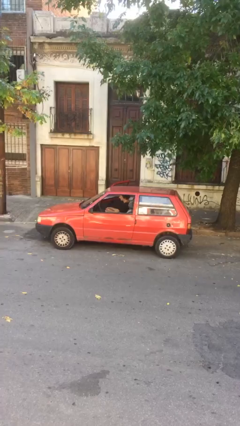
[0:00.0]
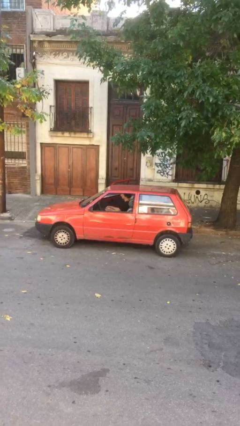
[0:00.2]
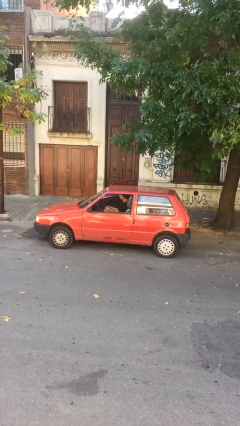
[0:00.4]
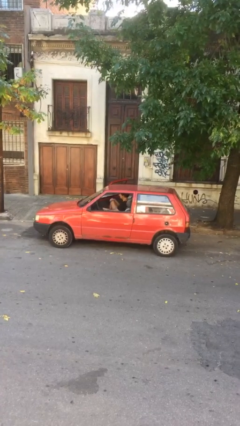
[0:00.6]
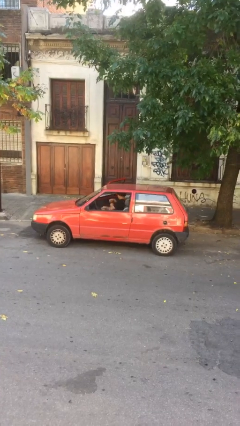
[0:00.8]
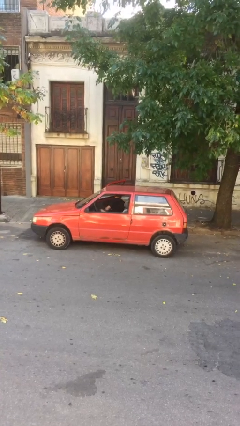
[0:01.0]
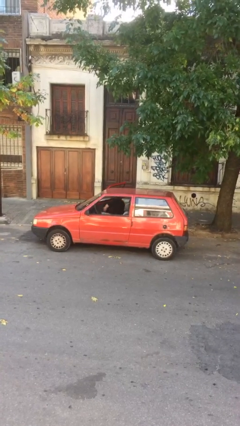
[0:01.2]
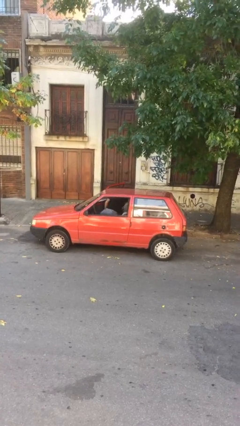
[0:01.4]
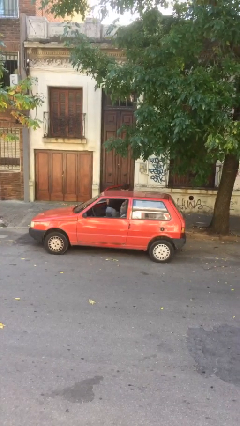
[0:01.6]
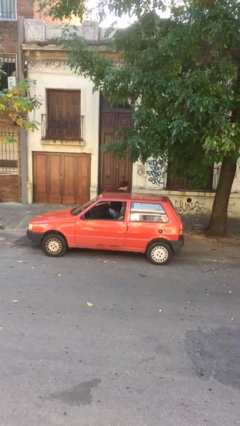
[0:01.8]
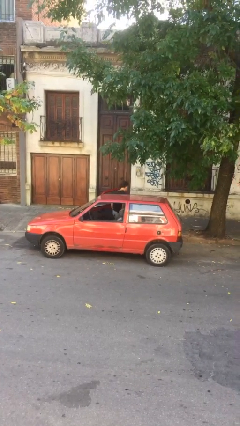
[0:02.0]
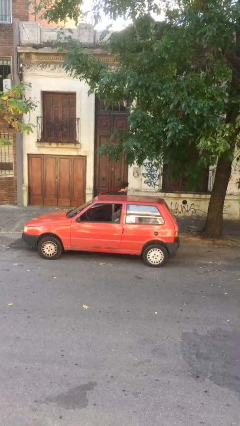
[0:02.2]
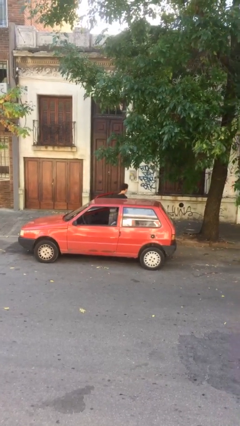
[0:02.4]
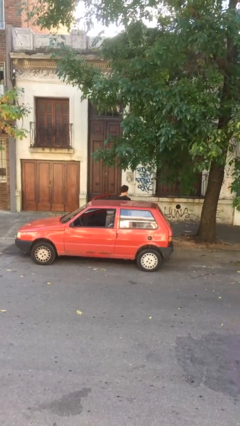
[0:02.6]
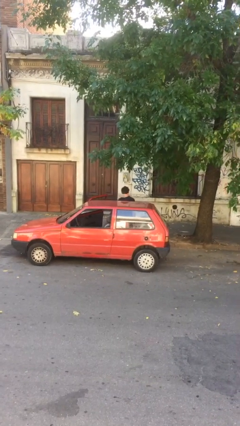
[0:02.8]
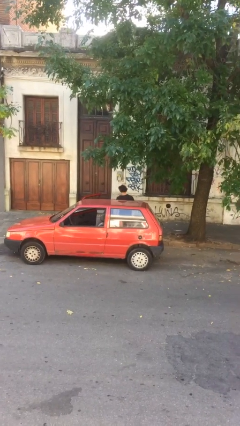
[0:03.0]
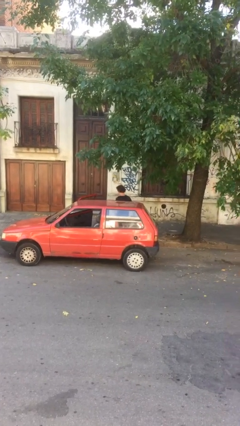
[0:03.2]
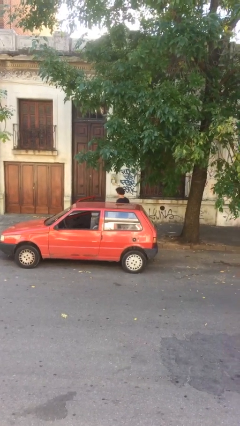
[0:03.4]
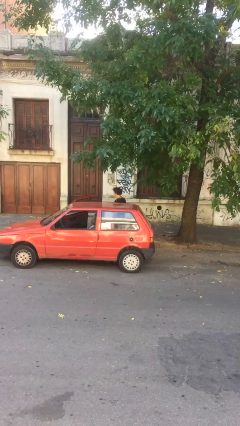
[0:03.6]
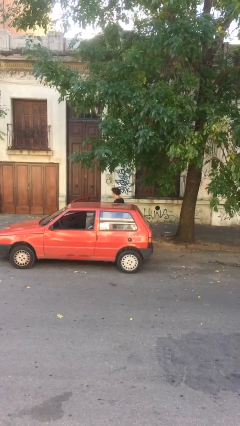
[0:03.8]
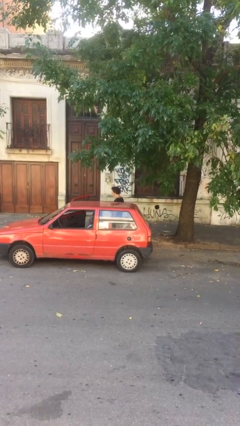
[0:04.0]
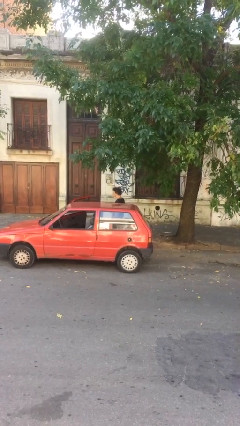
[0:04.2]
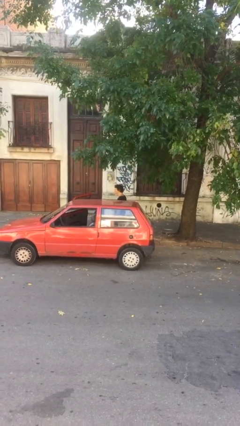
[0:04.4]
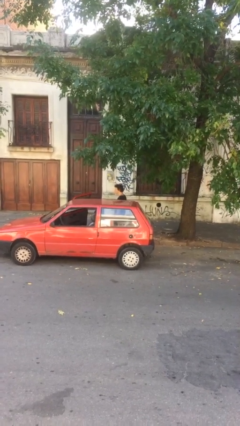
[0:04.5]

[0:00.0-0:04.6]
person exits car

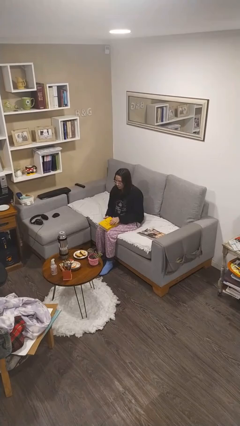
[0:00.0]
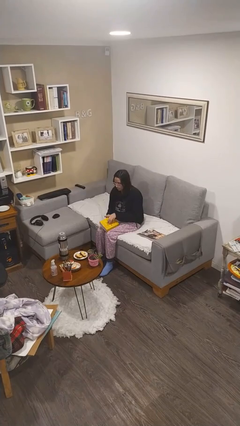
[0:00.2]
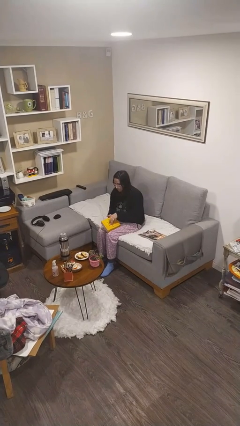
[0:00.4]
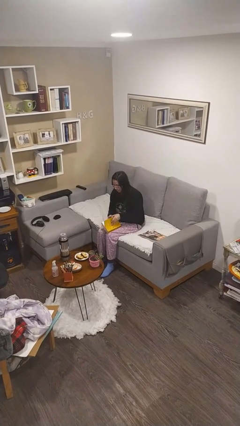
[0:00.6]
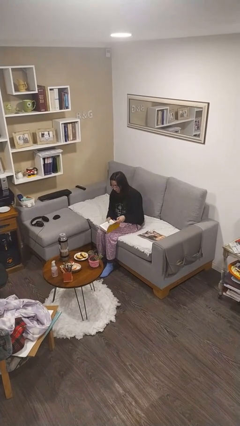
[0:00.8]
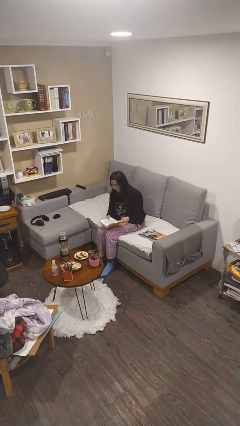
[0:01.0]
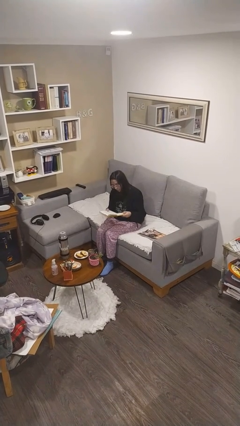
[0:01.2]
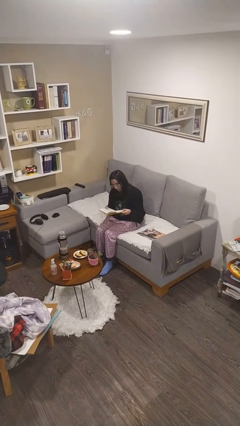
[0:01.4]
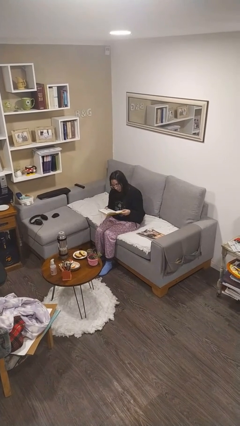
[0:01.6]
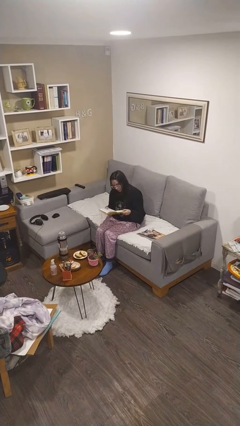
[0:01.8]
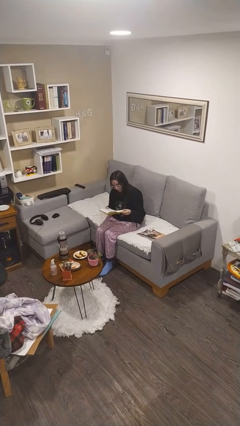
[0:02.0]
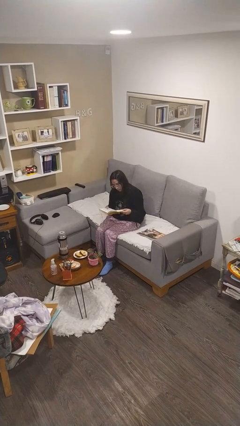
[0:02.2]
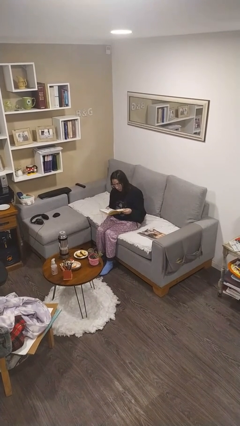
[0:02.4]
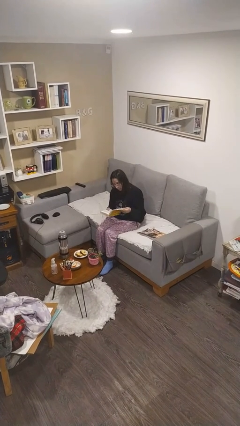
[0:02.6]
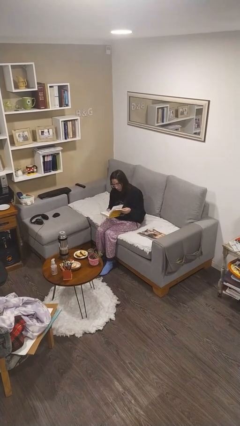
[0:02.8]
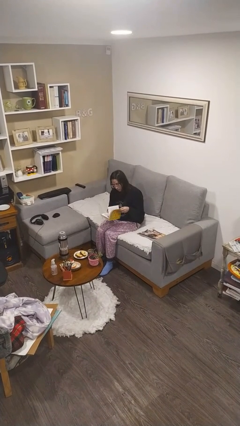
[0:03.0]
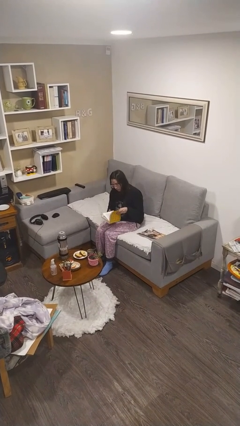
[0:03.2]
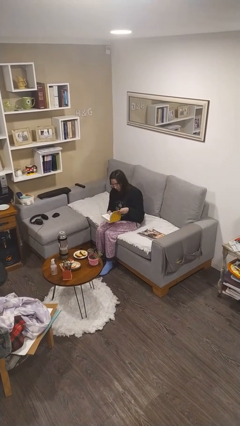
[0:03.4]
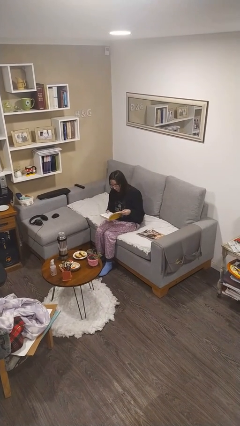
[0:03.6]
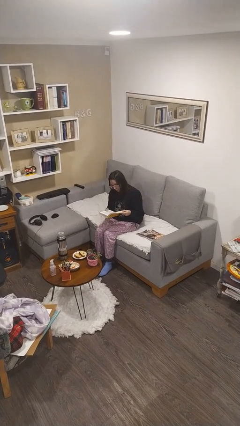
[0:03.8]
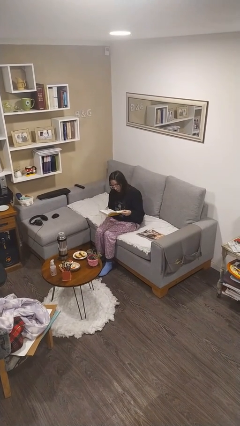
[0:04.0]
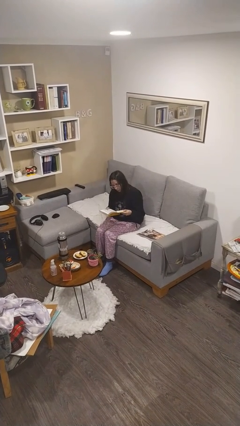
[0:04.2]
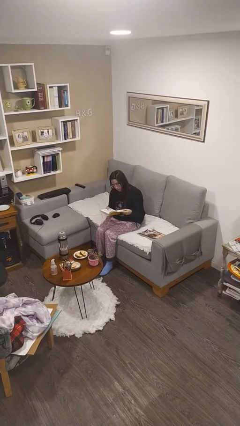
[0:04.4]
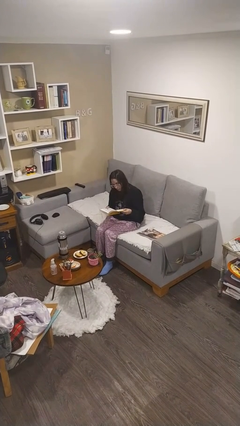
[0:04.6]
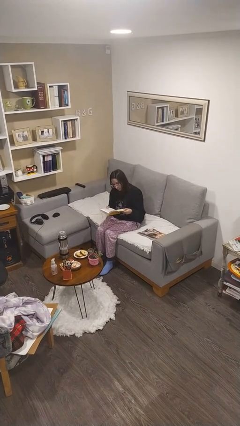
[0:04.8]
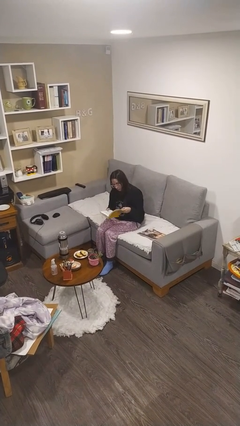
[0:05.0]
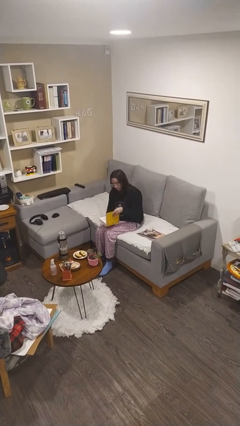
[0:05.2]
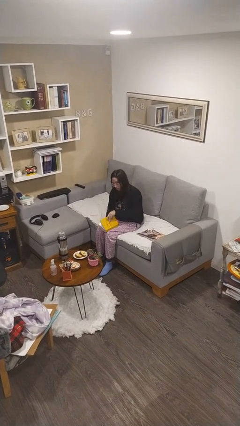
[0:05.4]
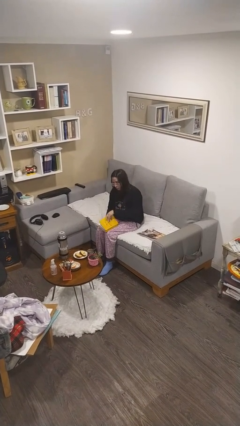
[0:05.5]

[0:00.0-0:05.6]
person reads book

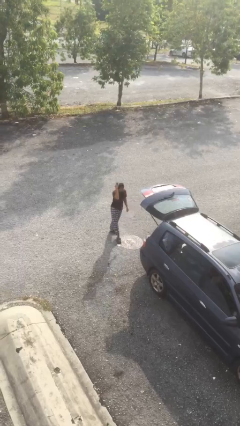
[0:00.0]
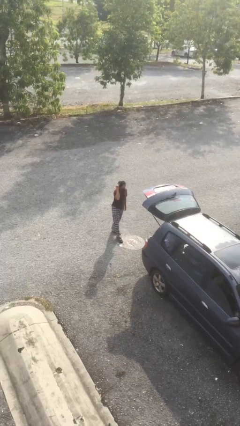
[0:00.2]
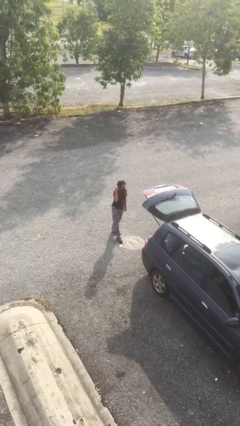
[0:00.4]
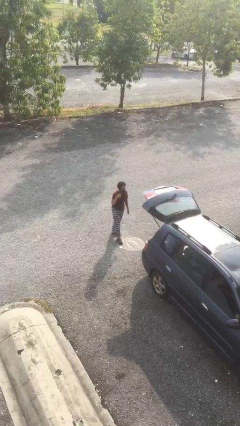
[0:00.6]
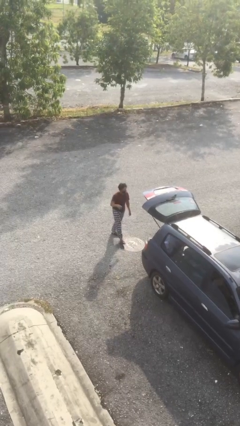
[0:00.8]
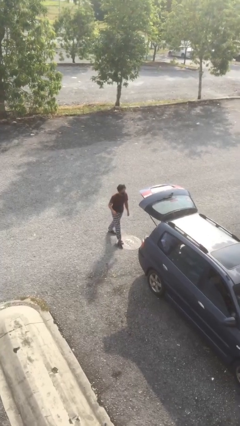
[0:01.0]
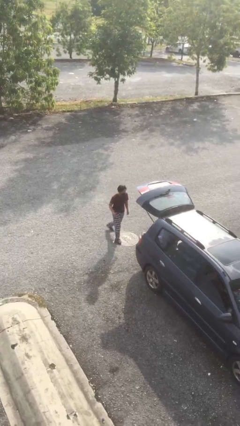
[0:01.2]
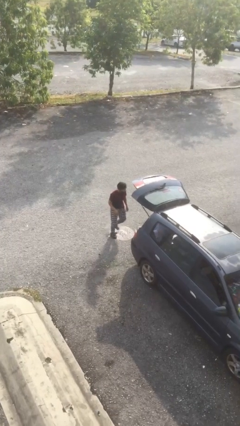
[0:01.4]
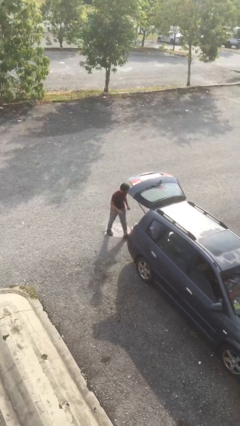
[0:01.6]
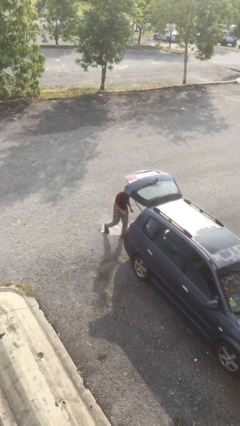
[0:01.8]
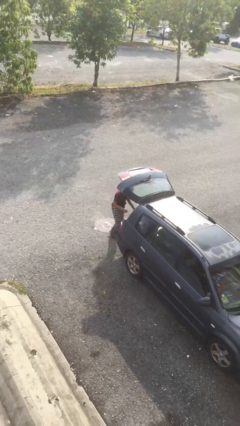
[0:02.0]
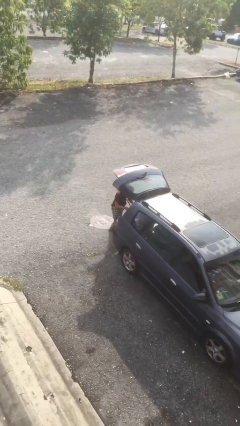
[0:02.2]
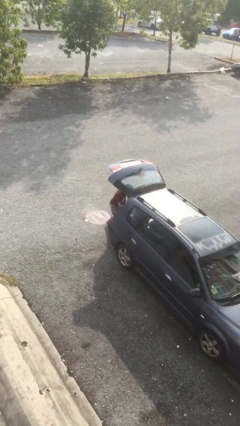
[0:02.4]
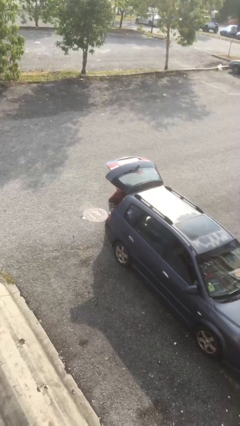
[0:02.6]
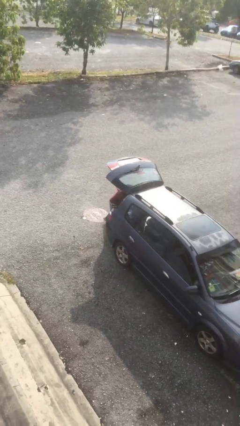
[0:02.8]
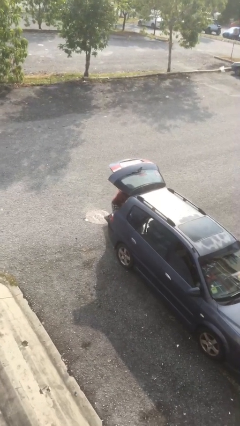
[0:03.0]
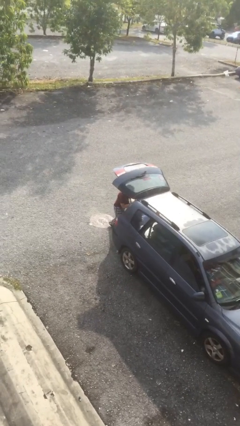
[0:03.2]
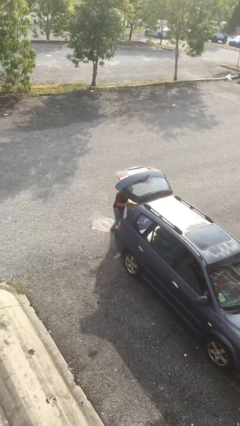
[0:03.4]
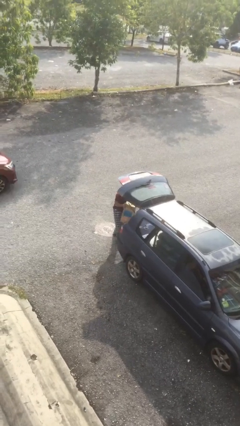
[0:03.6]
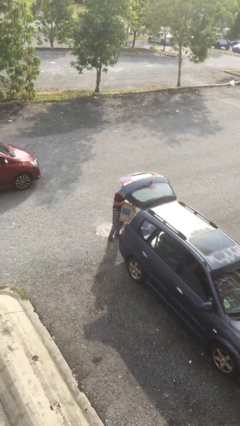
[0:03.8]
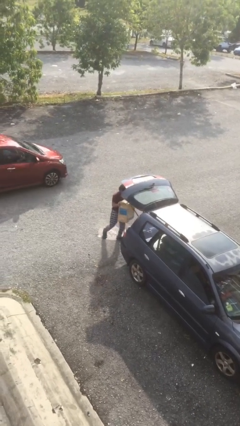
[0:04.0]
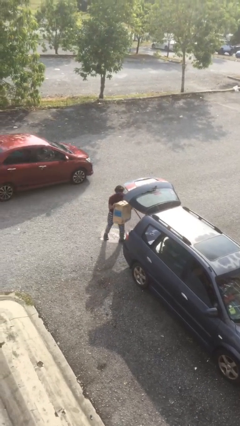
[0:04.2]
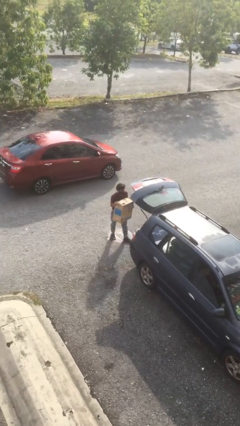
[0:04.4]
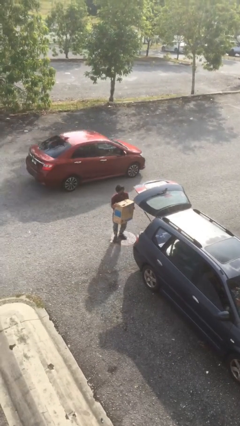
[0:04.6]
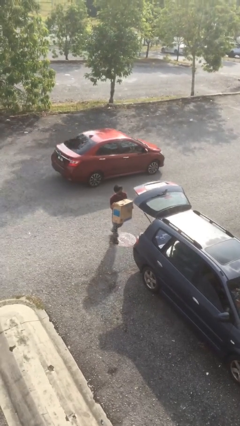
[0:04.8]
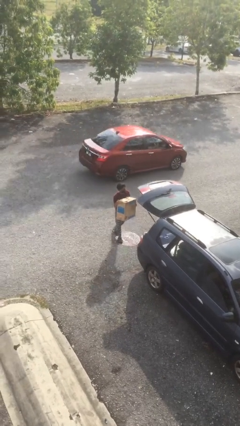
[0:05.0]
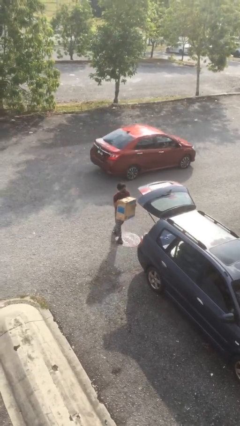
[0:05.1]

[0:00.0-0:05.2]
person unloads car

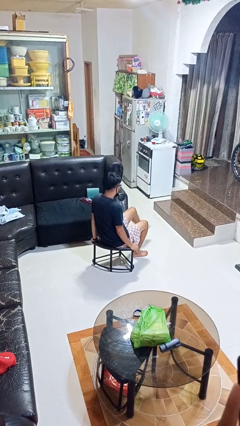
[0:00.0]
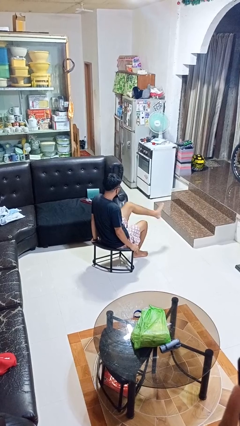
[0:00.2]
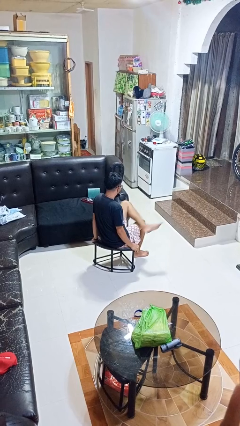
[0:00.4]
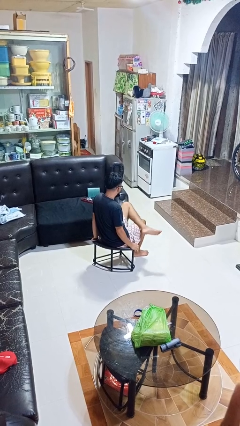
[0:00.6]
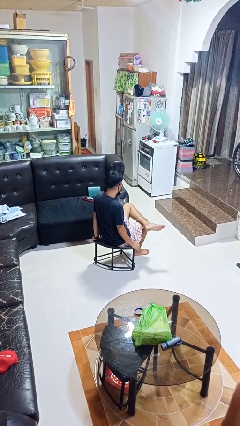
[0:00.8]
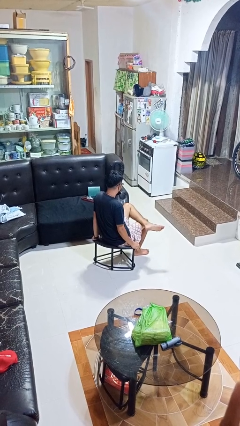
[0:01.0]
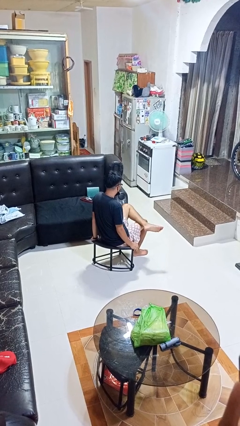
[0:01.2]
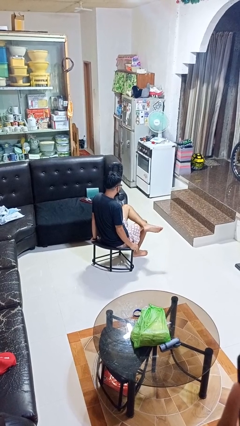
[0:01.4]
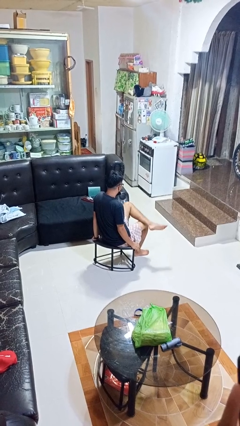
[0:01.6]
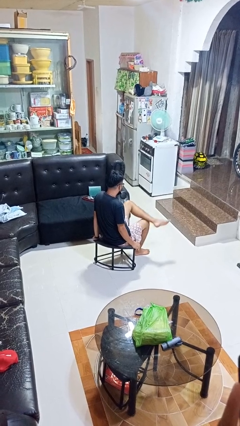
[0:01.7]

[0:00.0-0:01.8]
person crosses legs

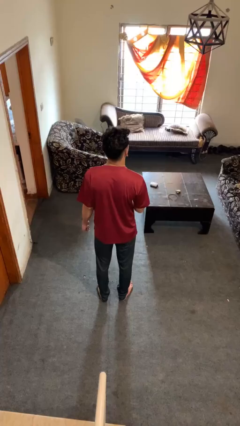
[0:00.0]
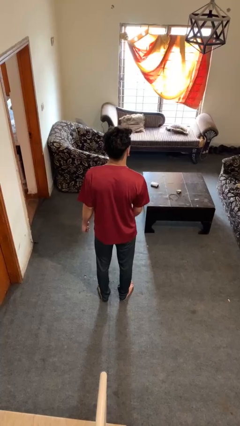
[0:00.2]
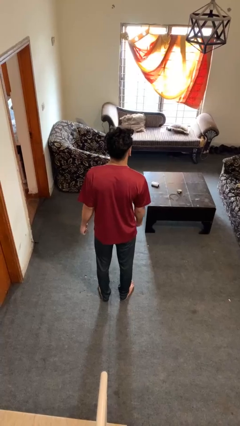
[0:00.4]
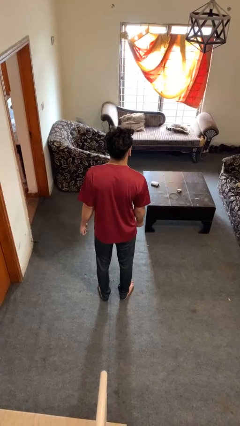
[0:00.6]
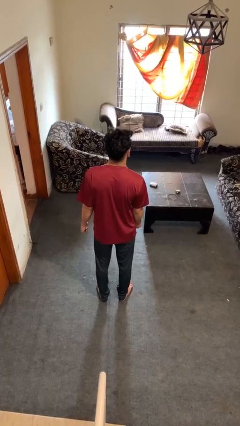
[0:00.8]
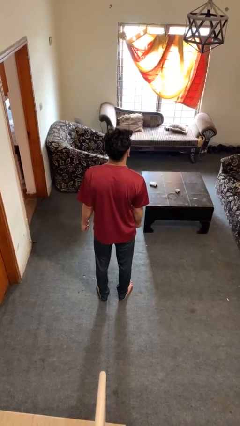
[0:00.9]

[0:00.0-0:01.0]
person catches dropped object
